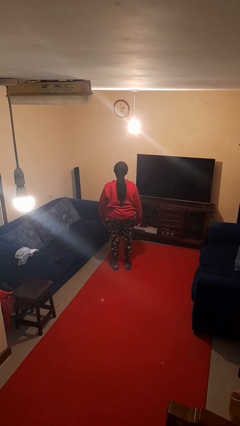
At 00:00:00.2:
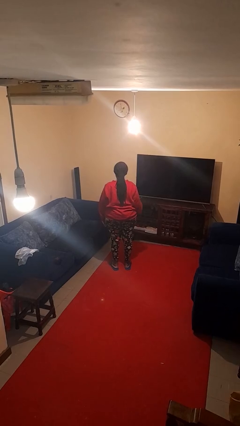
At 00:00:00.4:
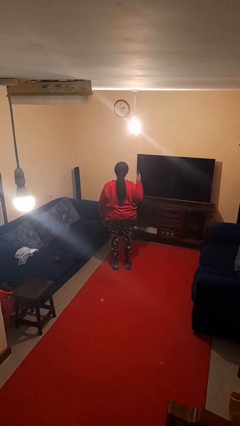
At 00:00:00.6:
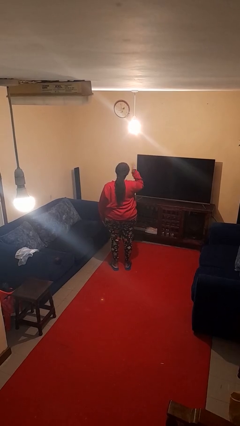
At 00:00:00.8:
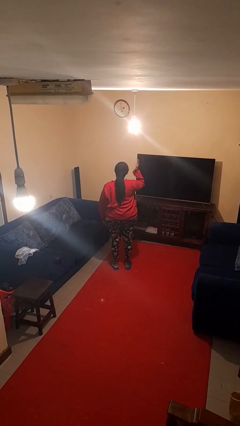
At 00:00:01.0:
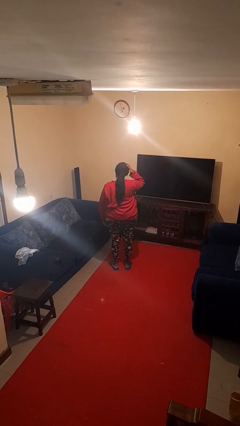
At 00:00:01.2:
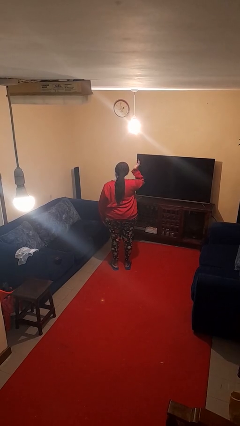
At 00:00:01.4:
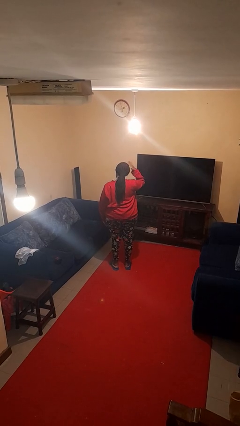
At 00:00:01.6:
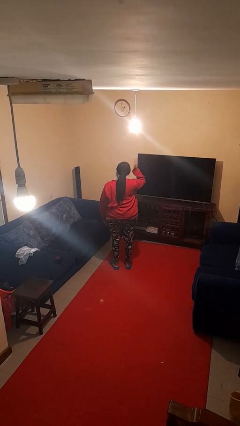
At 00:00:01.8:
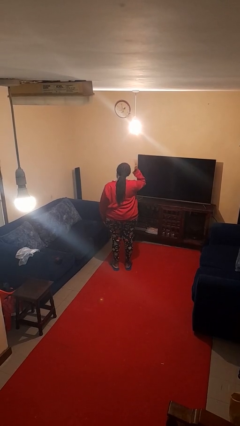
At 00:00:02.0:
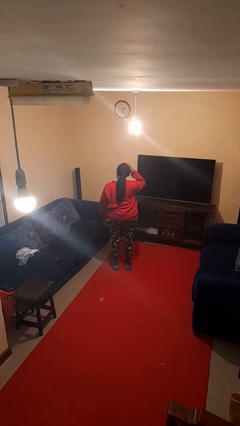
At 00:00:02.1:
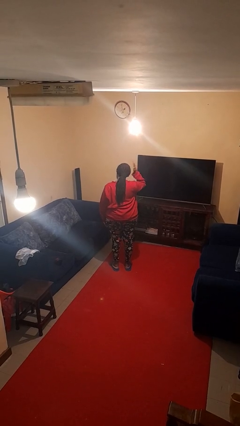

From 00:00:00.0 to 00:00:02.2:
person pats head

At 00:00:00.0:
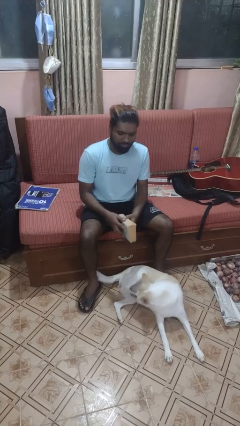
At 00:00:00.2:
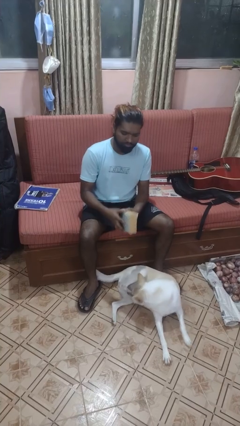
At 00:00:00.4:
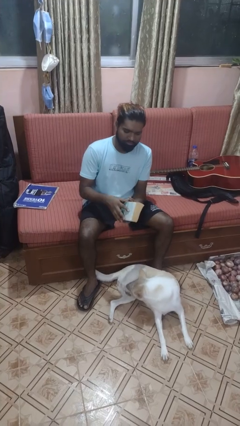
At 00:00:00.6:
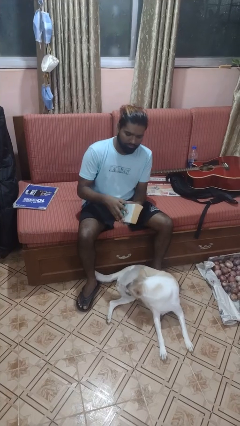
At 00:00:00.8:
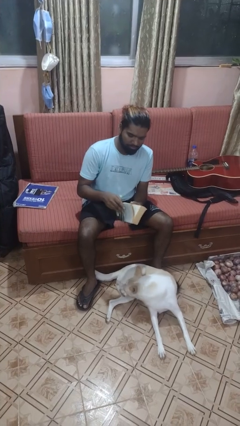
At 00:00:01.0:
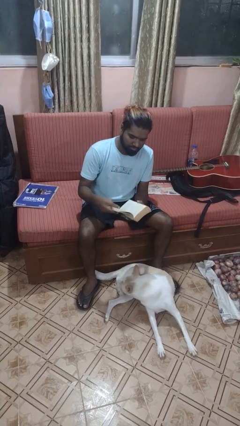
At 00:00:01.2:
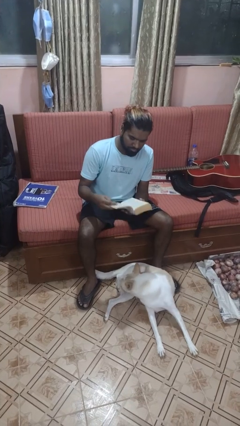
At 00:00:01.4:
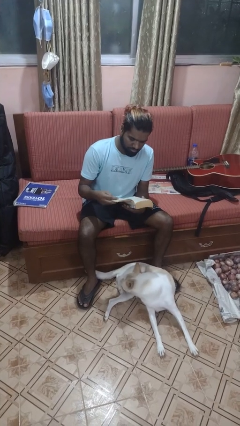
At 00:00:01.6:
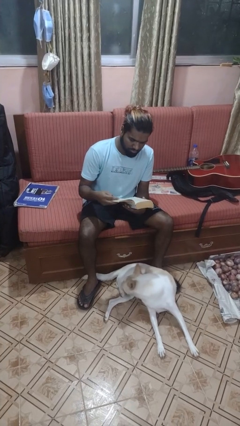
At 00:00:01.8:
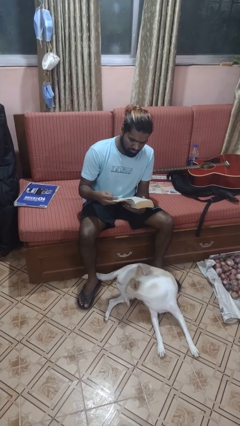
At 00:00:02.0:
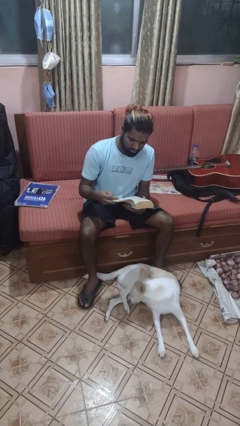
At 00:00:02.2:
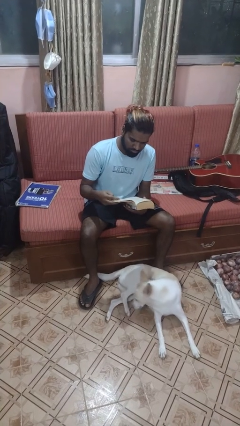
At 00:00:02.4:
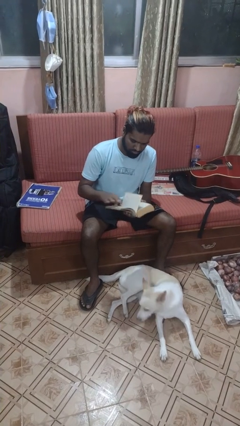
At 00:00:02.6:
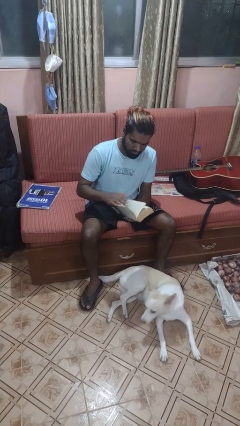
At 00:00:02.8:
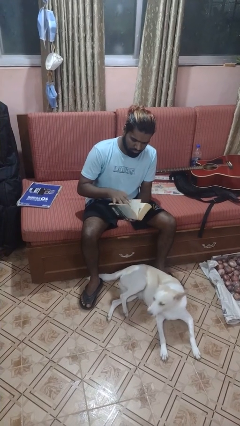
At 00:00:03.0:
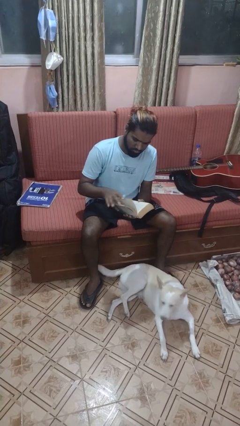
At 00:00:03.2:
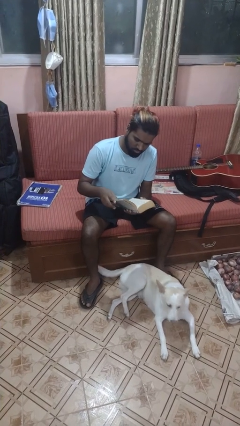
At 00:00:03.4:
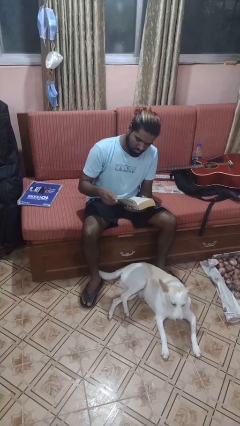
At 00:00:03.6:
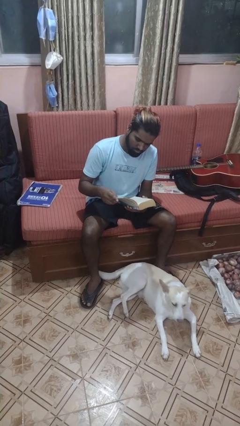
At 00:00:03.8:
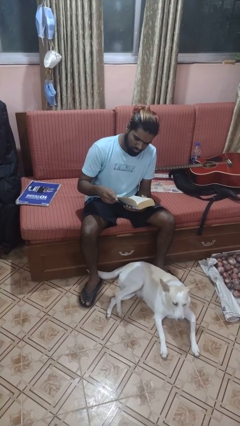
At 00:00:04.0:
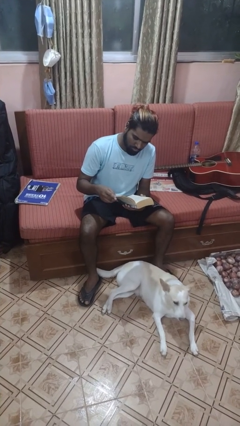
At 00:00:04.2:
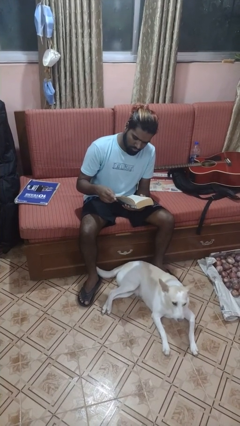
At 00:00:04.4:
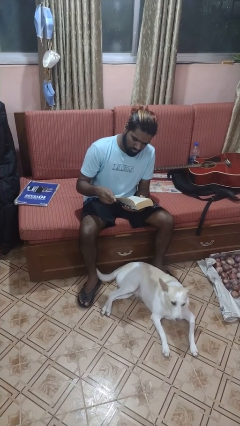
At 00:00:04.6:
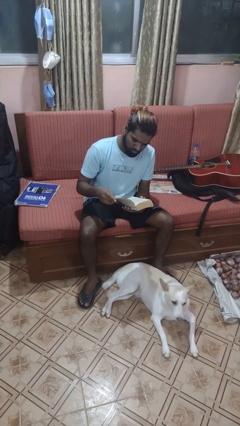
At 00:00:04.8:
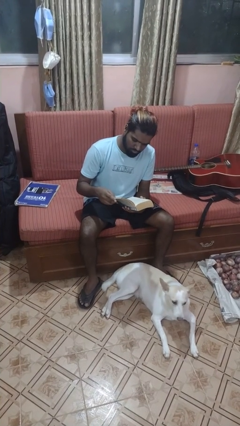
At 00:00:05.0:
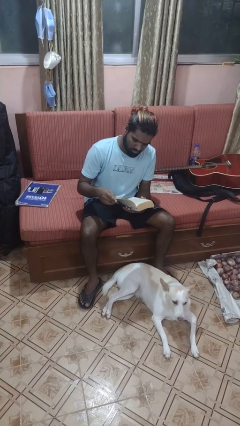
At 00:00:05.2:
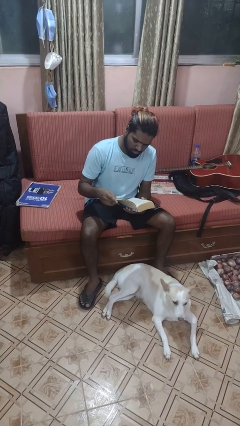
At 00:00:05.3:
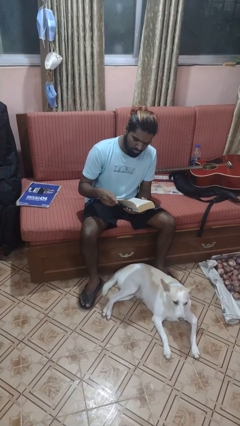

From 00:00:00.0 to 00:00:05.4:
person reads book

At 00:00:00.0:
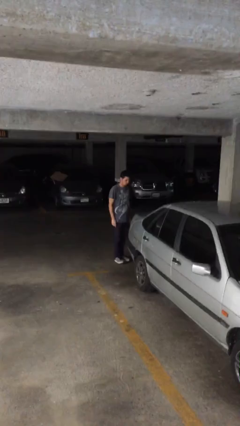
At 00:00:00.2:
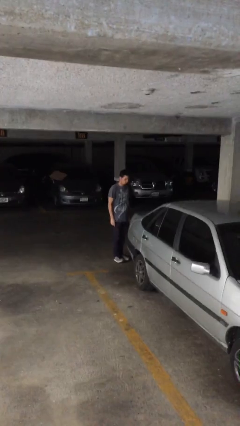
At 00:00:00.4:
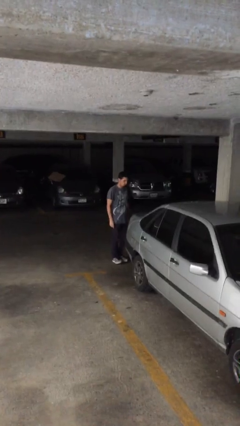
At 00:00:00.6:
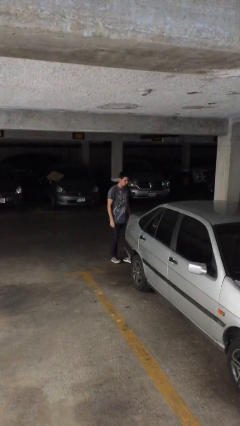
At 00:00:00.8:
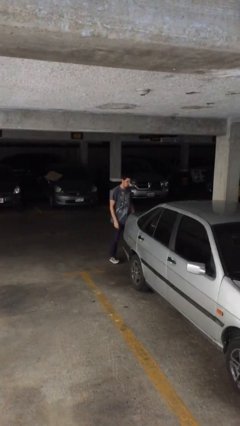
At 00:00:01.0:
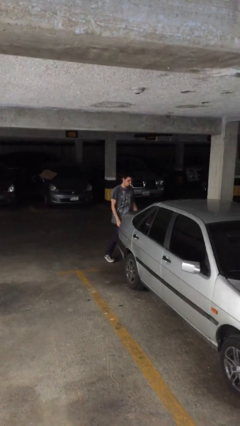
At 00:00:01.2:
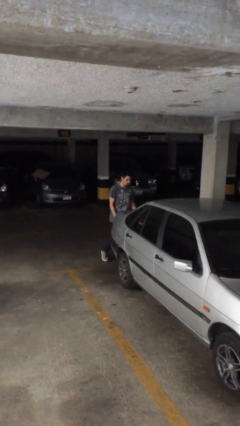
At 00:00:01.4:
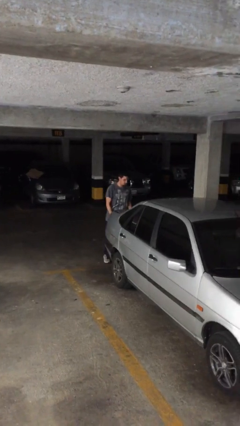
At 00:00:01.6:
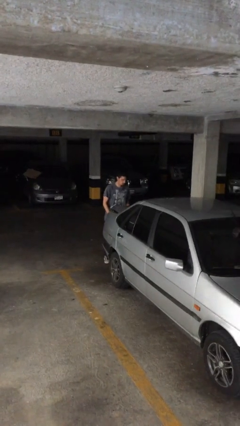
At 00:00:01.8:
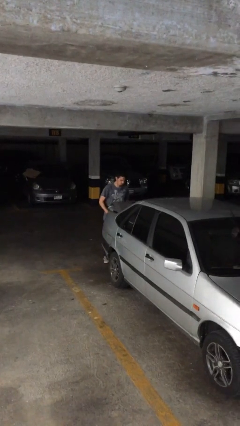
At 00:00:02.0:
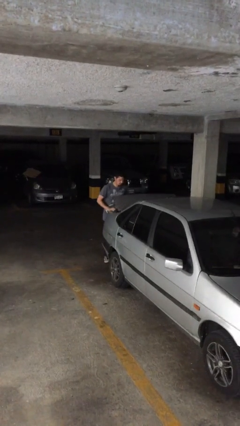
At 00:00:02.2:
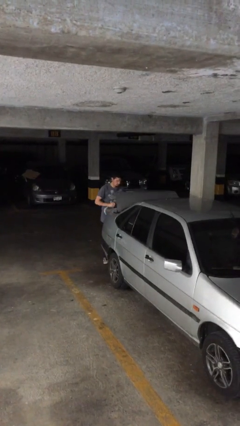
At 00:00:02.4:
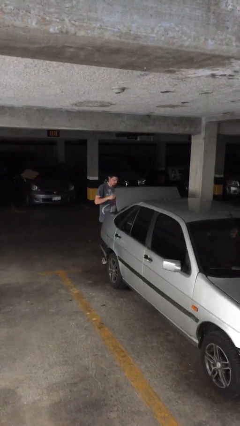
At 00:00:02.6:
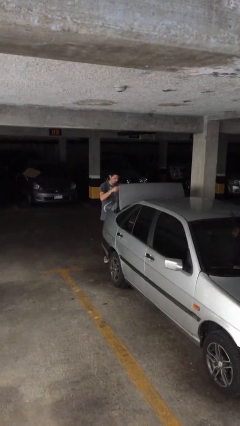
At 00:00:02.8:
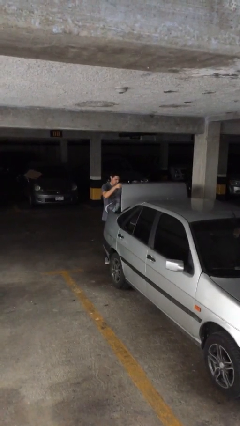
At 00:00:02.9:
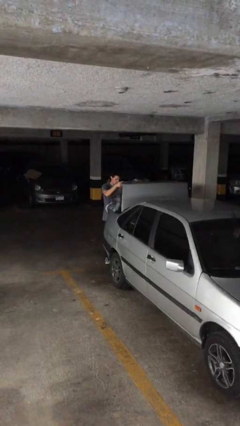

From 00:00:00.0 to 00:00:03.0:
person opens car trunk

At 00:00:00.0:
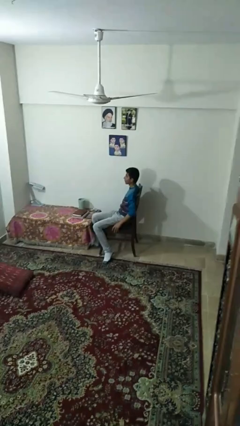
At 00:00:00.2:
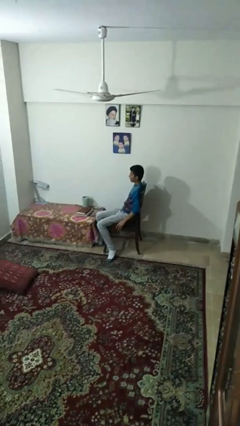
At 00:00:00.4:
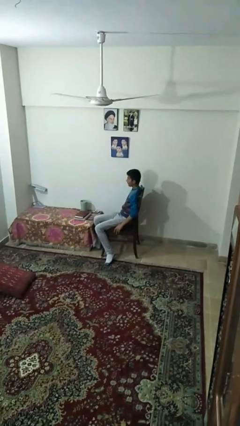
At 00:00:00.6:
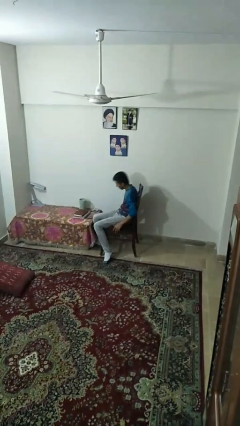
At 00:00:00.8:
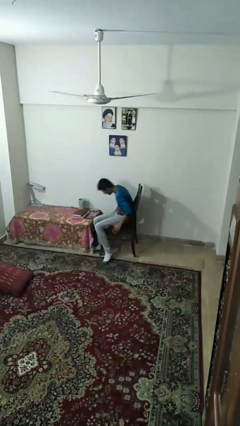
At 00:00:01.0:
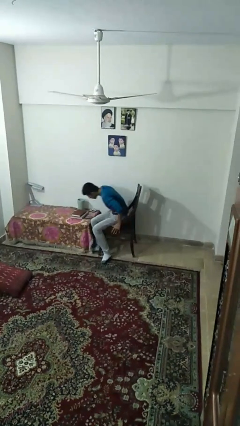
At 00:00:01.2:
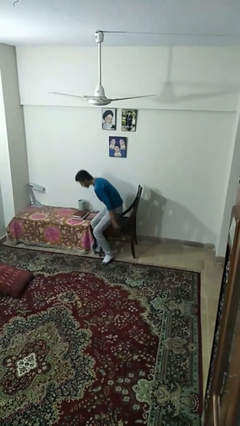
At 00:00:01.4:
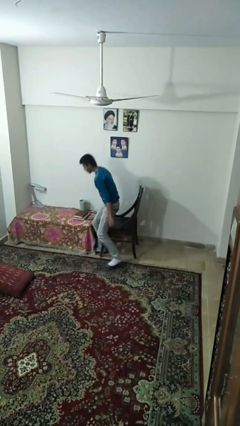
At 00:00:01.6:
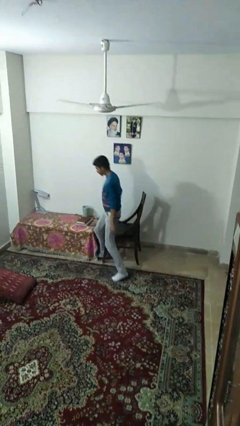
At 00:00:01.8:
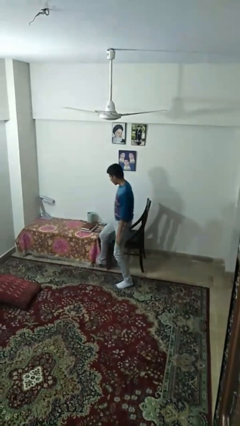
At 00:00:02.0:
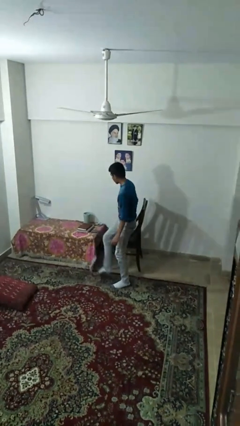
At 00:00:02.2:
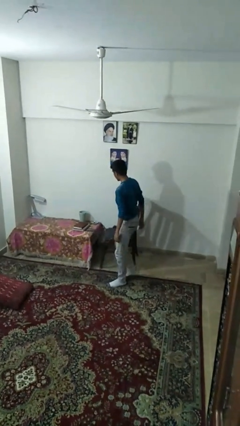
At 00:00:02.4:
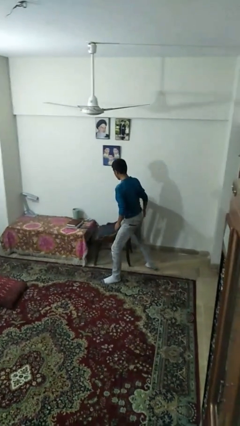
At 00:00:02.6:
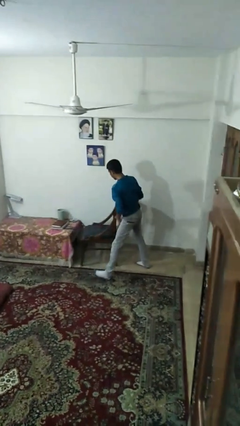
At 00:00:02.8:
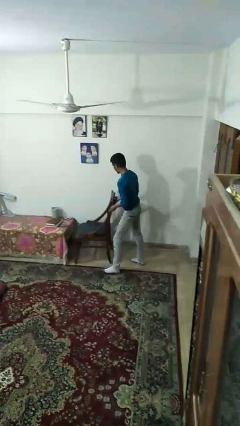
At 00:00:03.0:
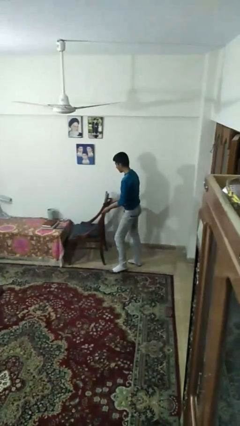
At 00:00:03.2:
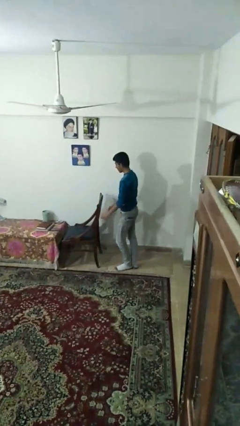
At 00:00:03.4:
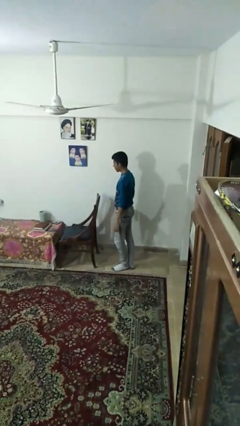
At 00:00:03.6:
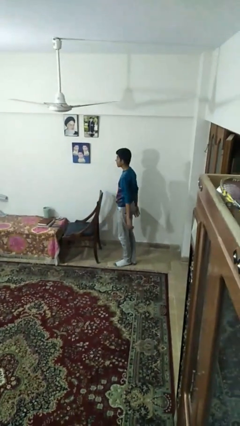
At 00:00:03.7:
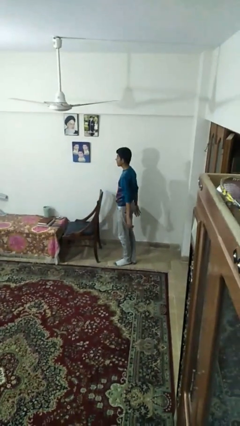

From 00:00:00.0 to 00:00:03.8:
person stands up

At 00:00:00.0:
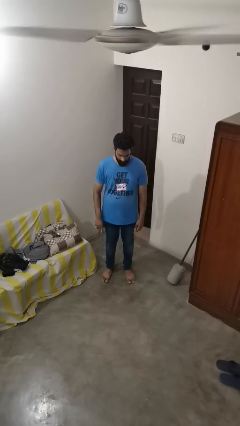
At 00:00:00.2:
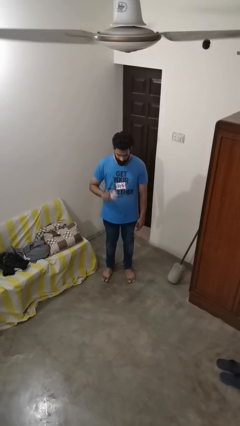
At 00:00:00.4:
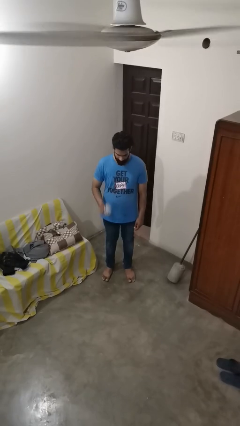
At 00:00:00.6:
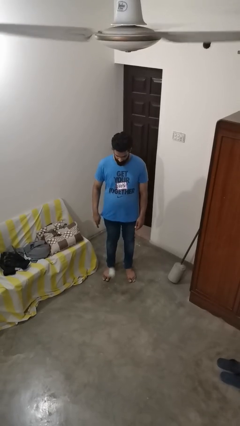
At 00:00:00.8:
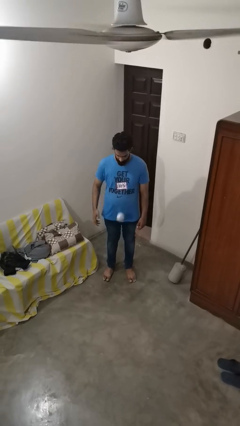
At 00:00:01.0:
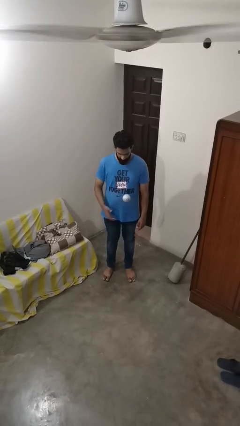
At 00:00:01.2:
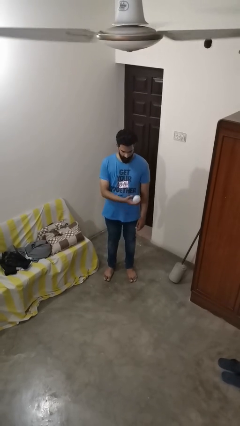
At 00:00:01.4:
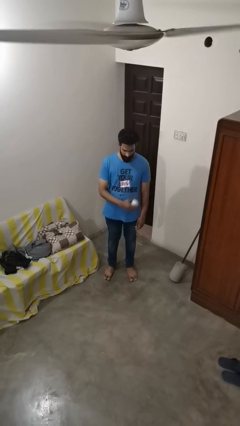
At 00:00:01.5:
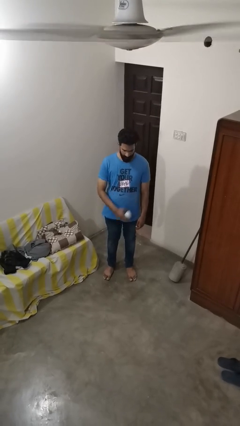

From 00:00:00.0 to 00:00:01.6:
person bounces ball on floor

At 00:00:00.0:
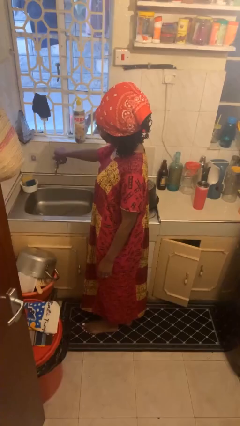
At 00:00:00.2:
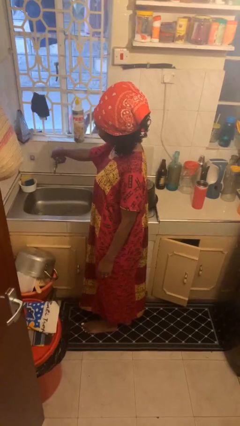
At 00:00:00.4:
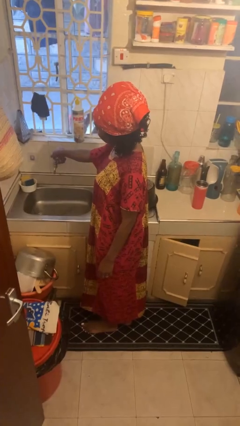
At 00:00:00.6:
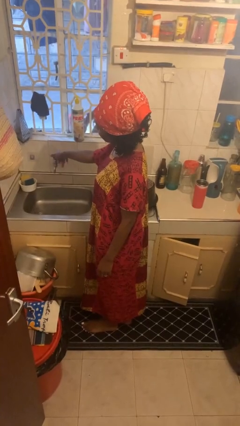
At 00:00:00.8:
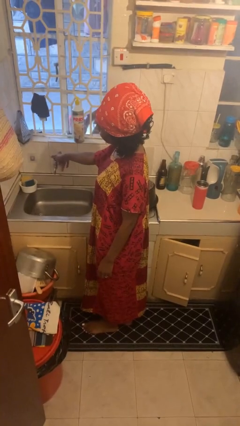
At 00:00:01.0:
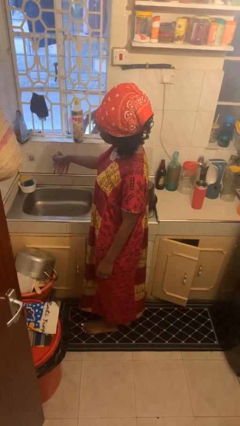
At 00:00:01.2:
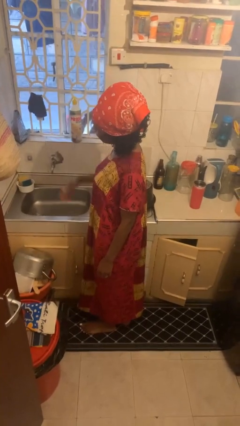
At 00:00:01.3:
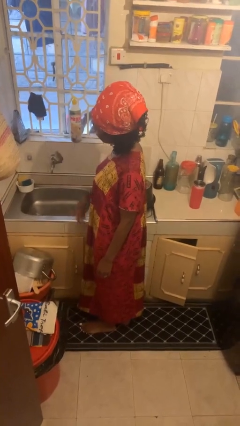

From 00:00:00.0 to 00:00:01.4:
person turns off faucet
